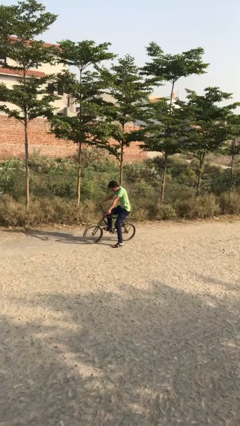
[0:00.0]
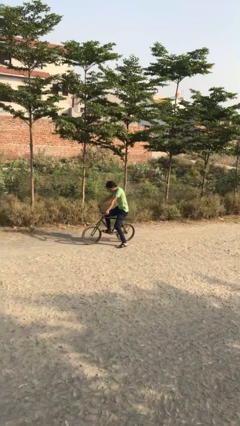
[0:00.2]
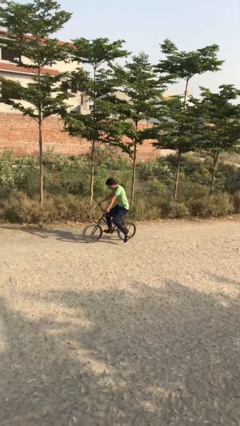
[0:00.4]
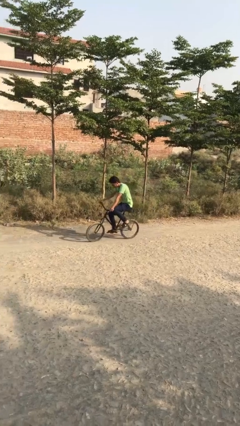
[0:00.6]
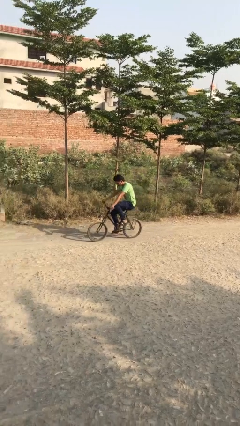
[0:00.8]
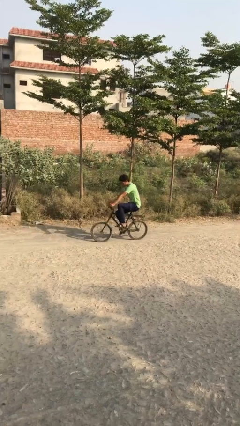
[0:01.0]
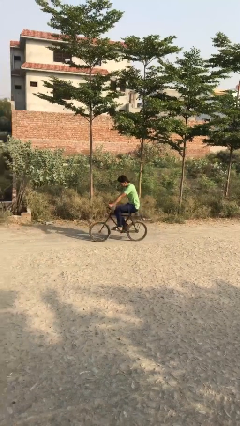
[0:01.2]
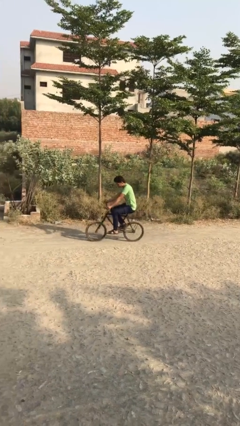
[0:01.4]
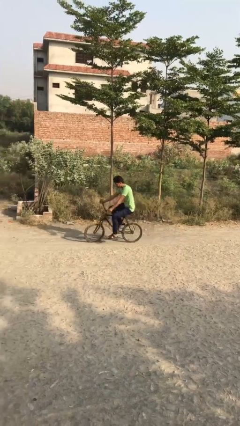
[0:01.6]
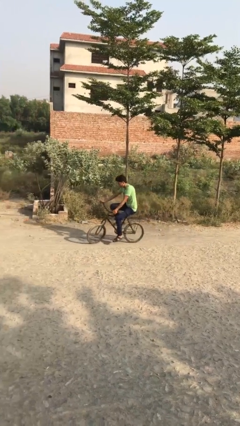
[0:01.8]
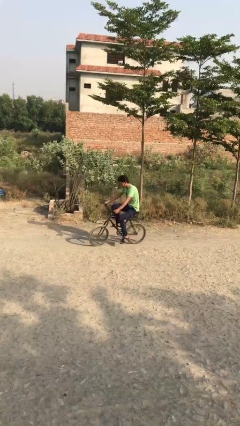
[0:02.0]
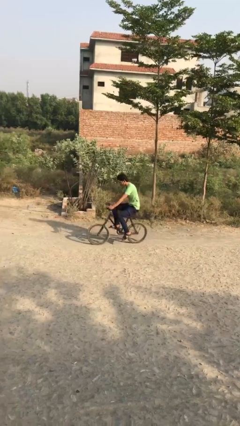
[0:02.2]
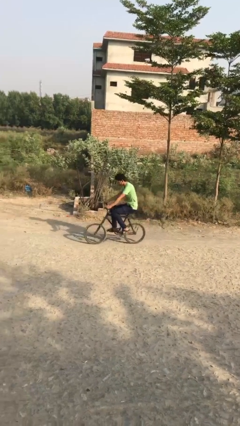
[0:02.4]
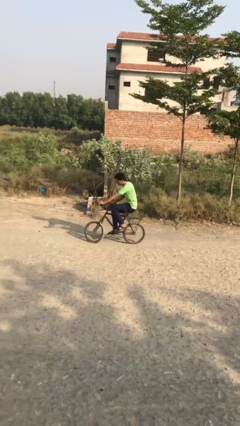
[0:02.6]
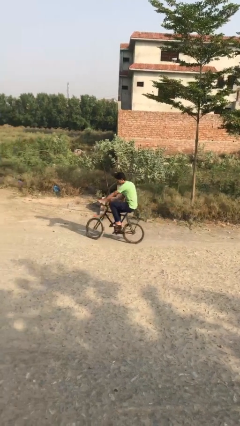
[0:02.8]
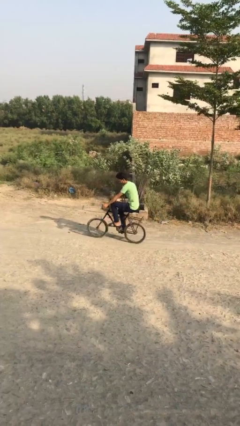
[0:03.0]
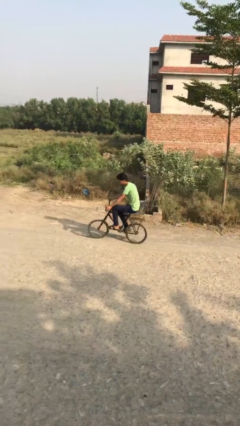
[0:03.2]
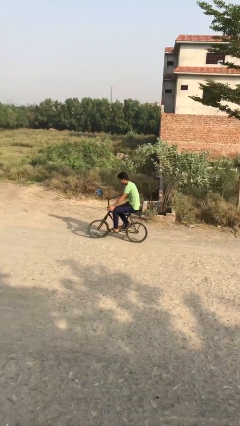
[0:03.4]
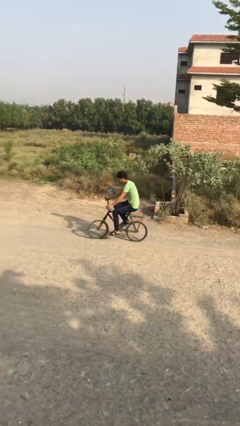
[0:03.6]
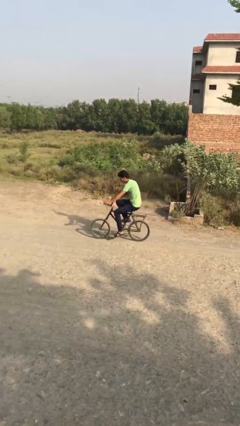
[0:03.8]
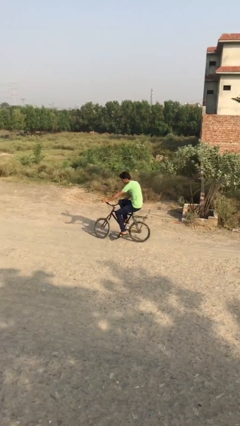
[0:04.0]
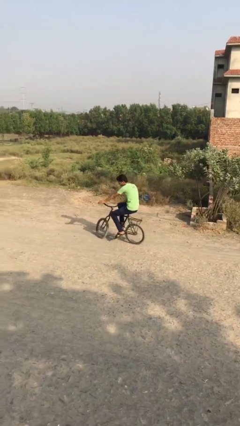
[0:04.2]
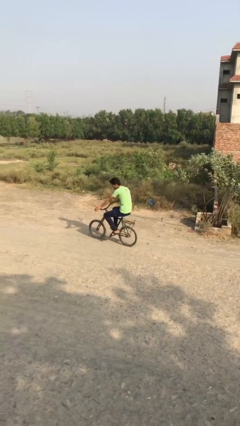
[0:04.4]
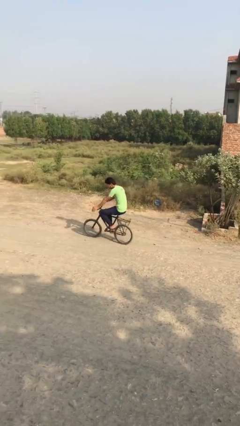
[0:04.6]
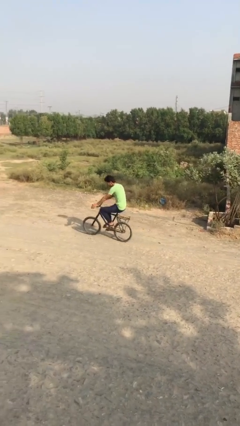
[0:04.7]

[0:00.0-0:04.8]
person rides bicycle

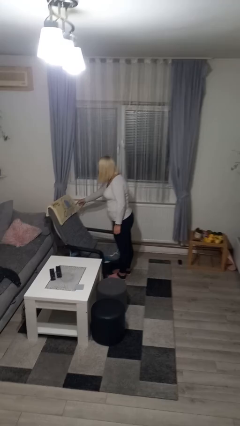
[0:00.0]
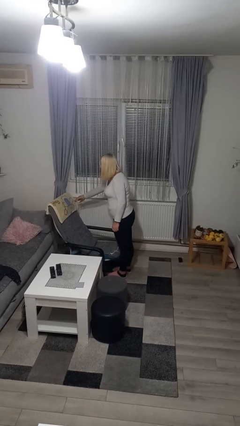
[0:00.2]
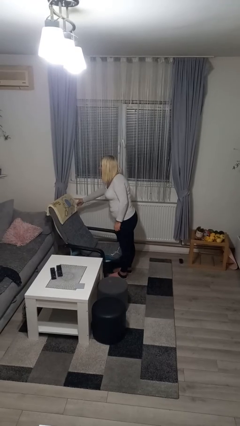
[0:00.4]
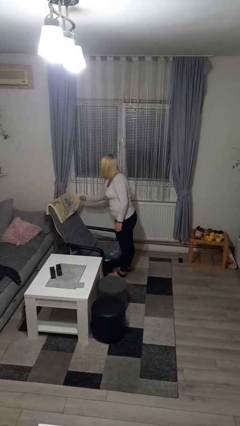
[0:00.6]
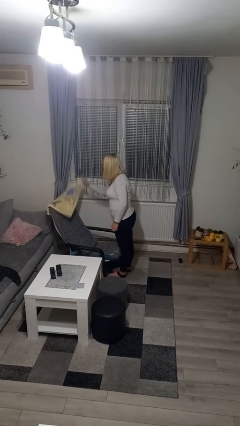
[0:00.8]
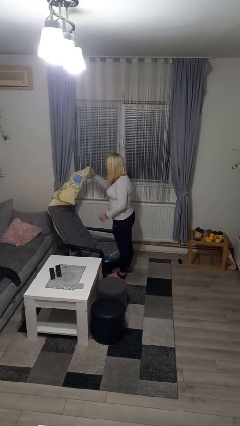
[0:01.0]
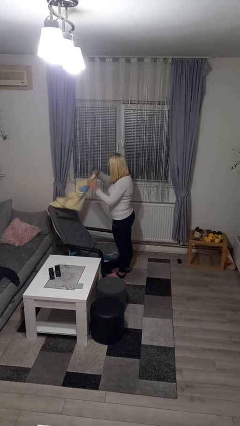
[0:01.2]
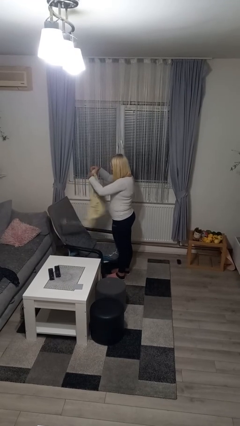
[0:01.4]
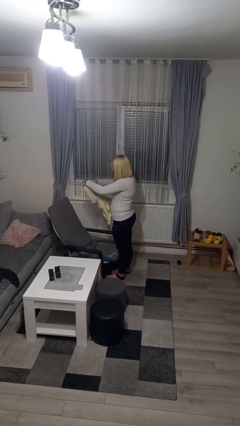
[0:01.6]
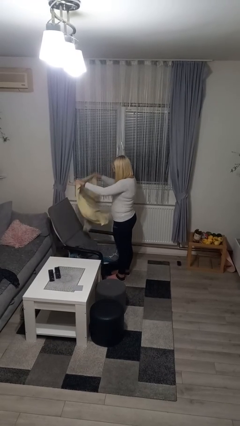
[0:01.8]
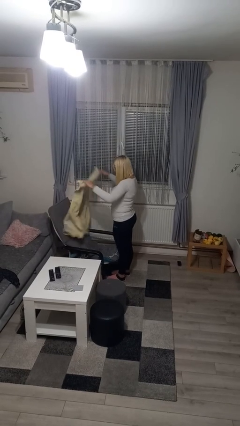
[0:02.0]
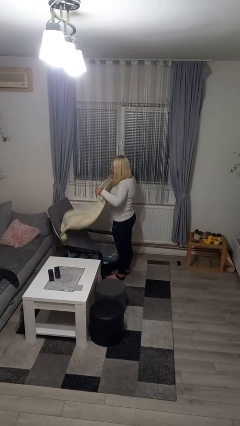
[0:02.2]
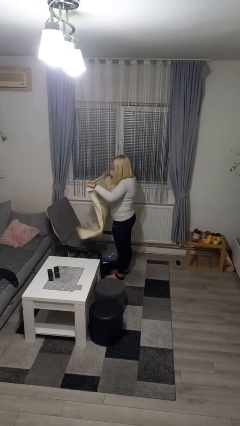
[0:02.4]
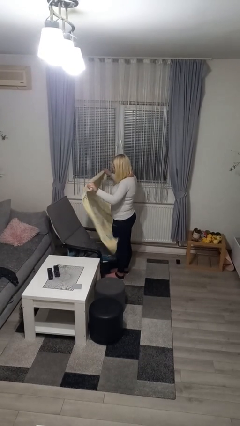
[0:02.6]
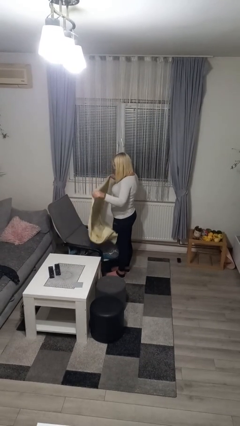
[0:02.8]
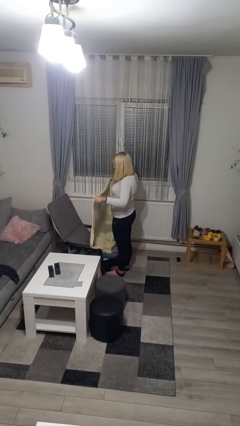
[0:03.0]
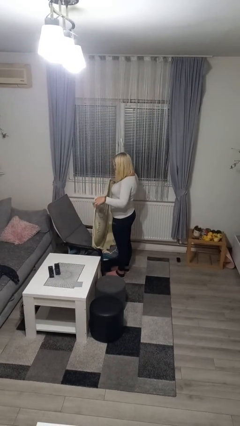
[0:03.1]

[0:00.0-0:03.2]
person unfolds blanket

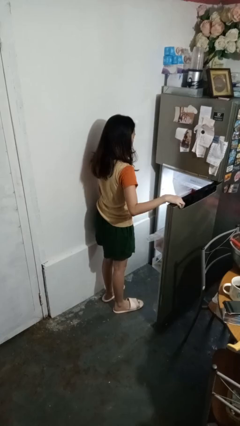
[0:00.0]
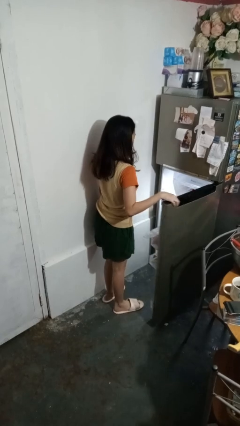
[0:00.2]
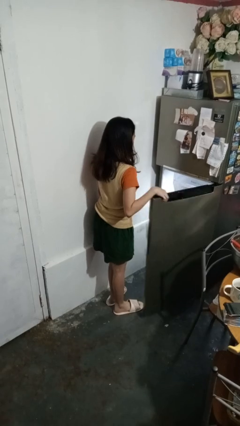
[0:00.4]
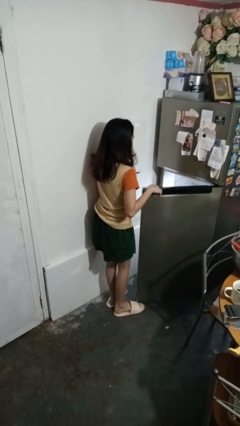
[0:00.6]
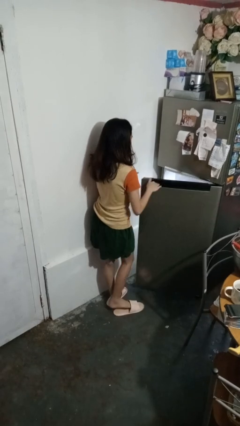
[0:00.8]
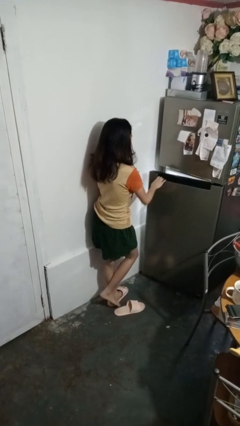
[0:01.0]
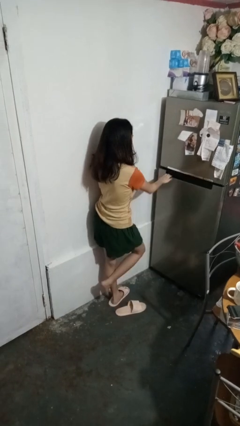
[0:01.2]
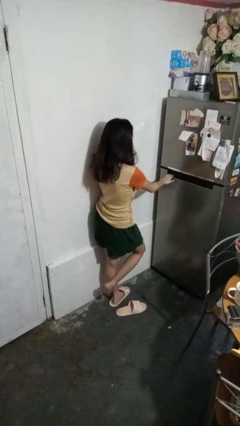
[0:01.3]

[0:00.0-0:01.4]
person closes refrigerator

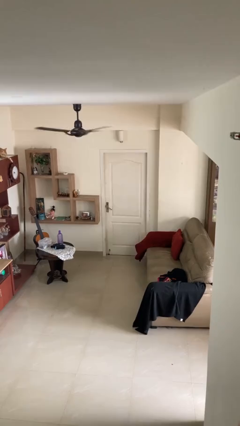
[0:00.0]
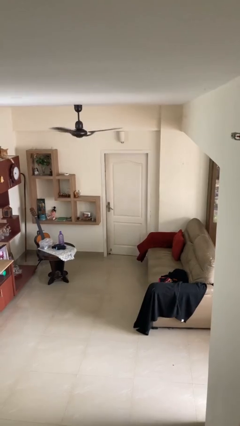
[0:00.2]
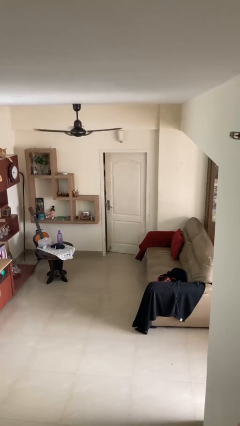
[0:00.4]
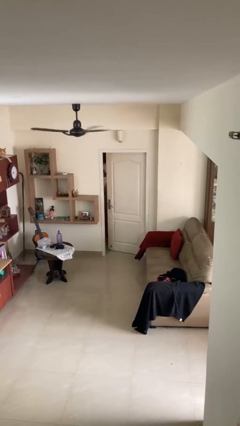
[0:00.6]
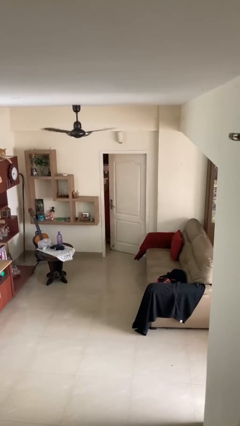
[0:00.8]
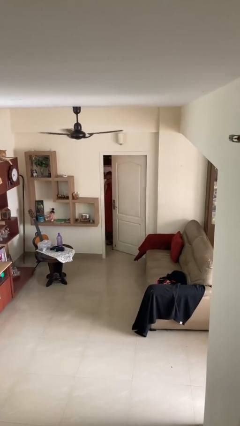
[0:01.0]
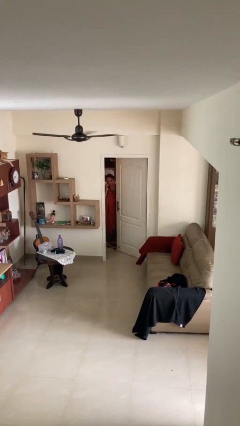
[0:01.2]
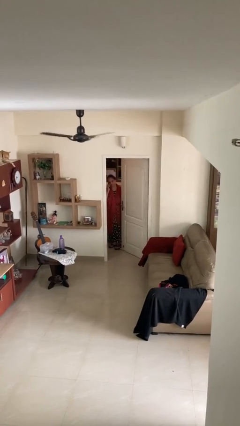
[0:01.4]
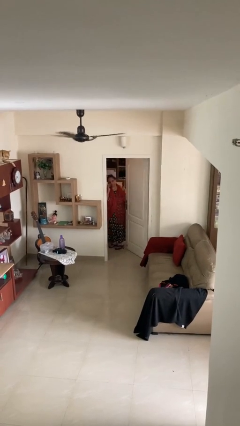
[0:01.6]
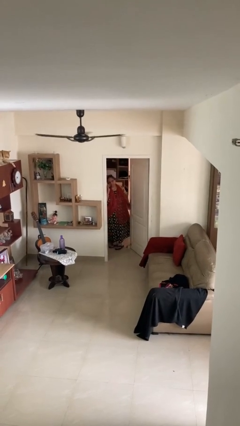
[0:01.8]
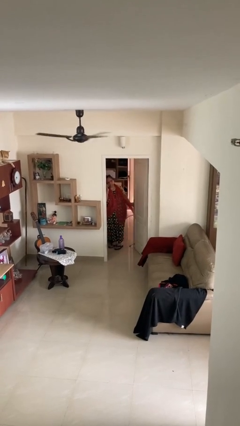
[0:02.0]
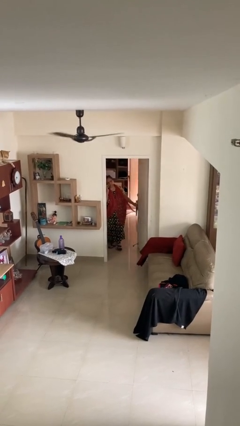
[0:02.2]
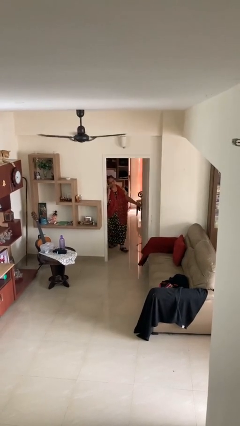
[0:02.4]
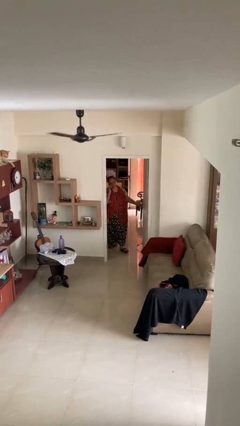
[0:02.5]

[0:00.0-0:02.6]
person opens facility door

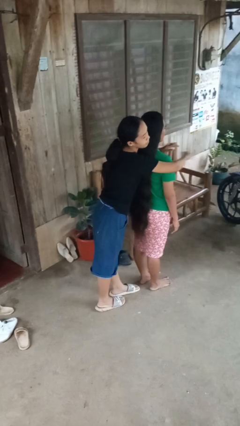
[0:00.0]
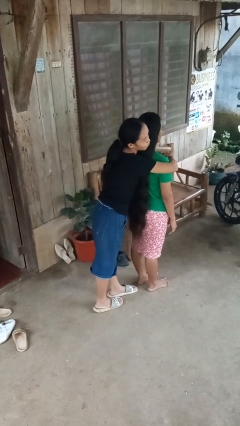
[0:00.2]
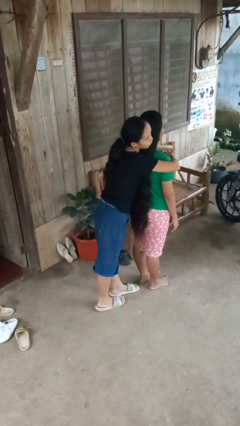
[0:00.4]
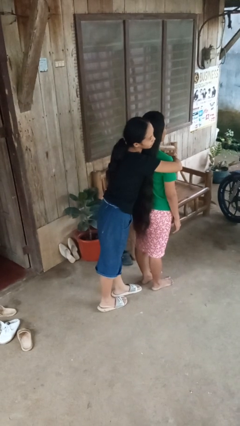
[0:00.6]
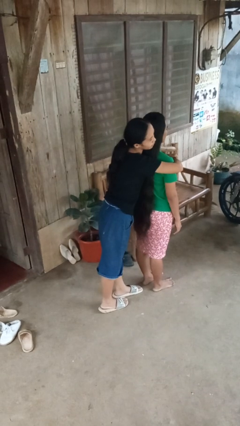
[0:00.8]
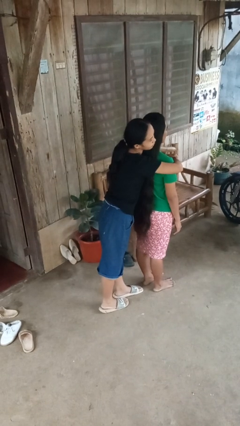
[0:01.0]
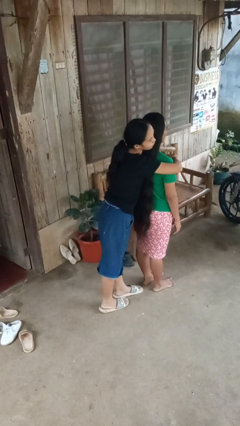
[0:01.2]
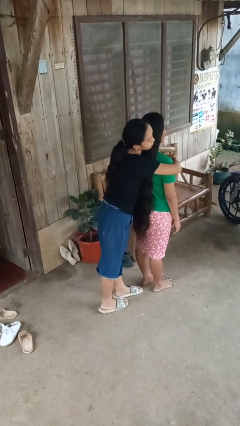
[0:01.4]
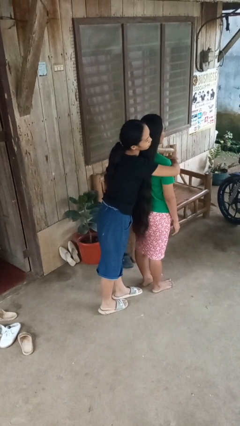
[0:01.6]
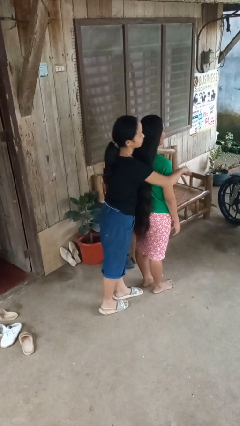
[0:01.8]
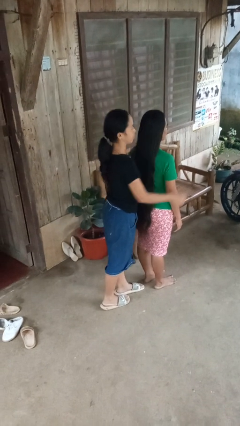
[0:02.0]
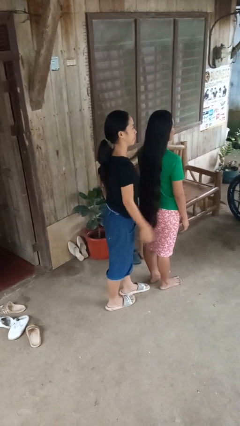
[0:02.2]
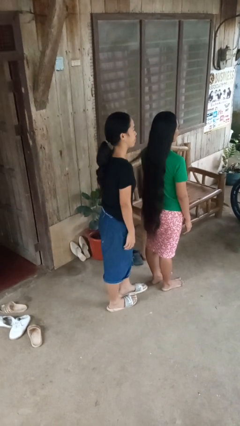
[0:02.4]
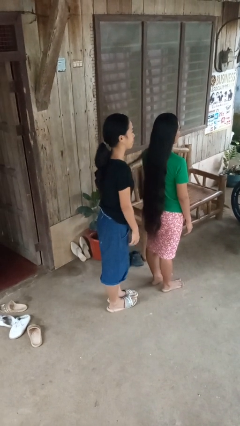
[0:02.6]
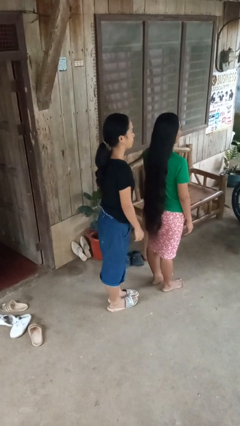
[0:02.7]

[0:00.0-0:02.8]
person hugs person from behind

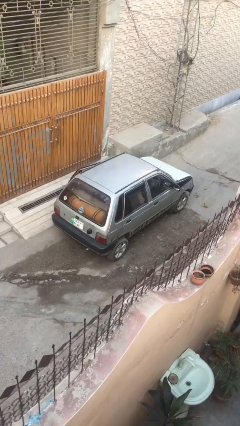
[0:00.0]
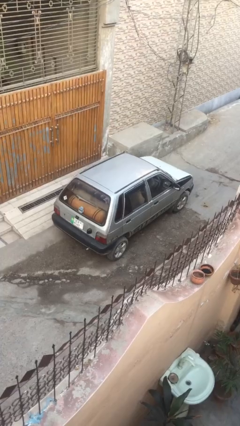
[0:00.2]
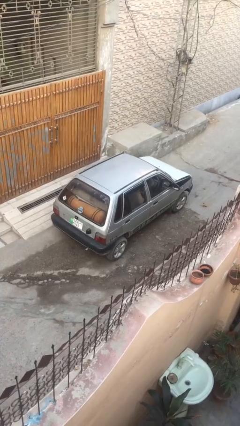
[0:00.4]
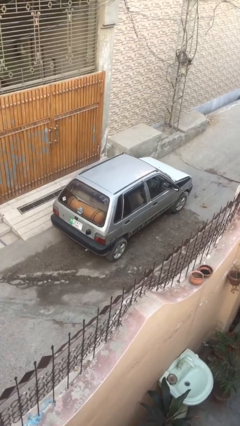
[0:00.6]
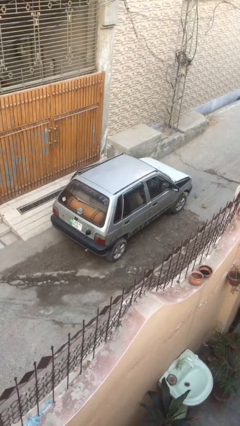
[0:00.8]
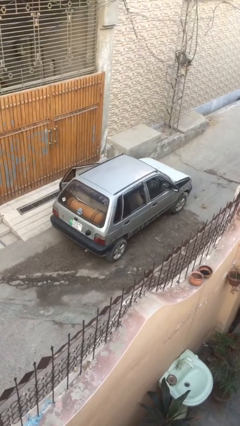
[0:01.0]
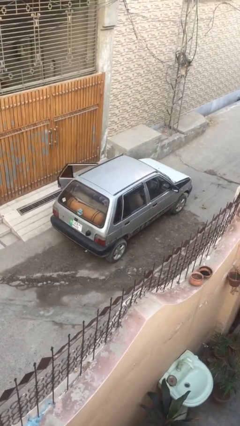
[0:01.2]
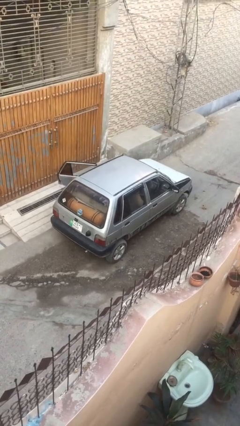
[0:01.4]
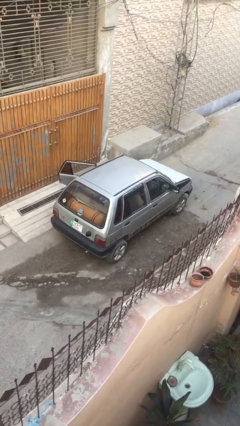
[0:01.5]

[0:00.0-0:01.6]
car drops off person

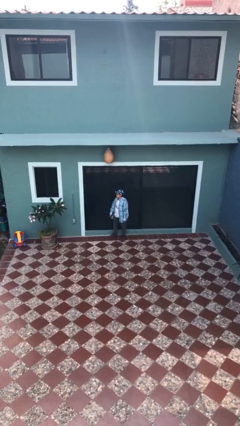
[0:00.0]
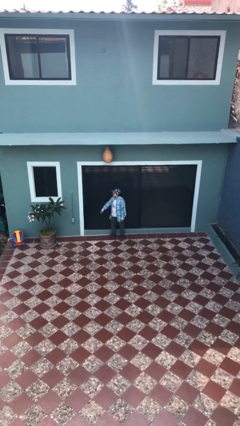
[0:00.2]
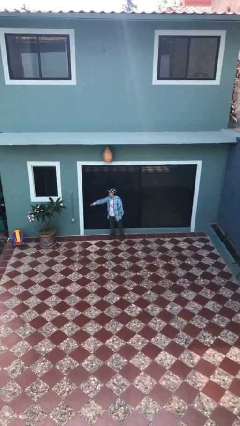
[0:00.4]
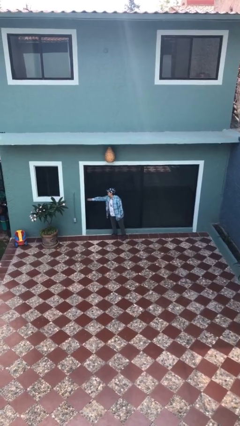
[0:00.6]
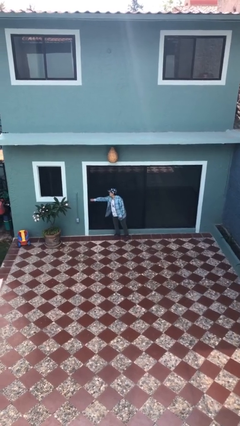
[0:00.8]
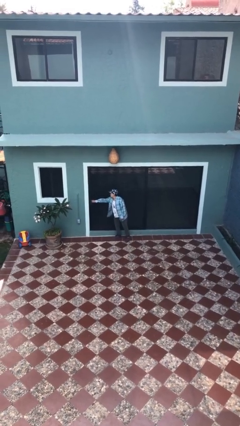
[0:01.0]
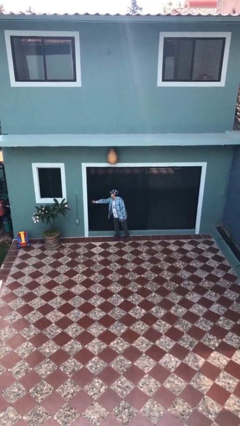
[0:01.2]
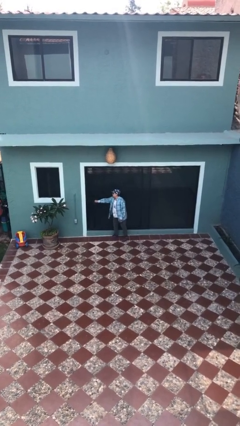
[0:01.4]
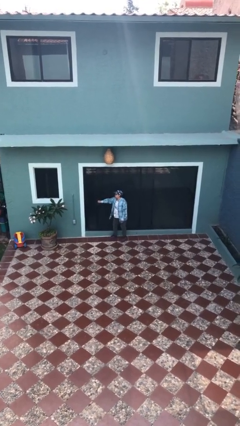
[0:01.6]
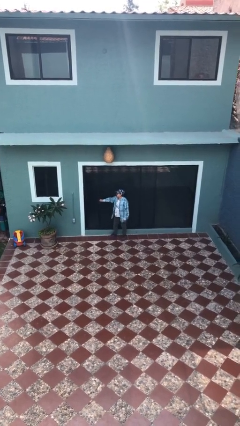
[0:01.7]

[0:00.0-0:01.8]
person opens sliding door
